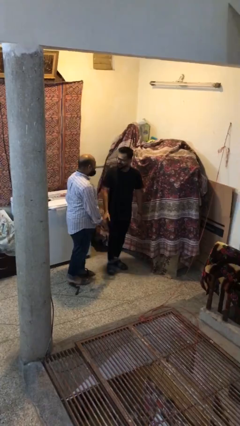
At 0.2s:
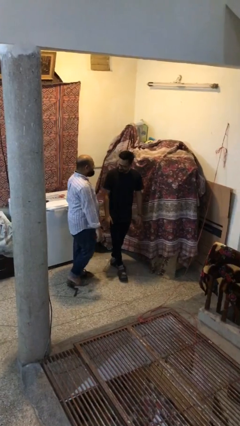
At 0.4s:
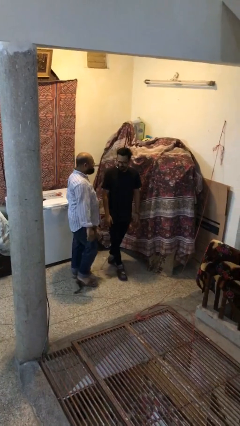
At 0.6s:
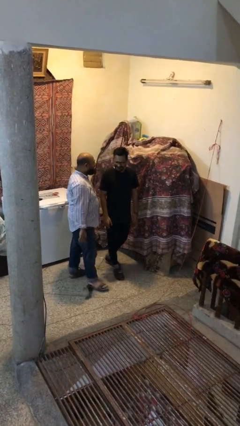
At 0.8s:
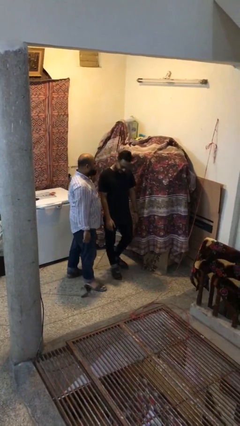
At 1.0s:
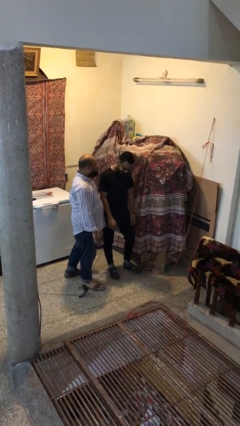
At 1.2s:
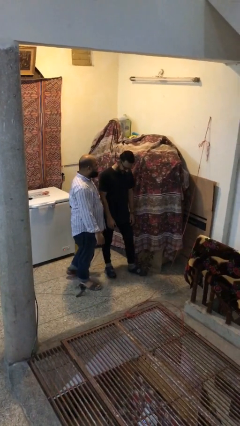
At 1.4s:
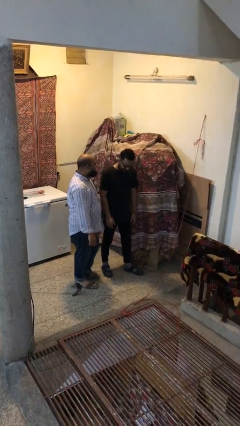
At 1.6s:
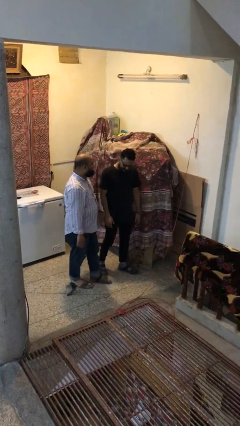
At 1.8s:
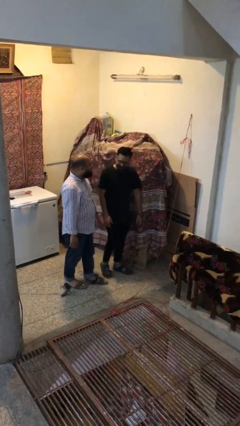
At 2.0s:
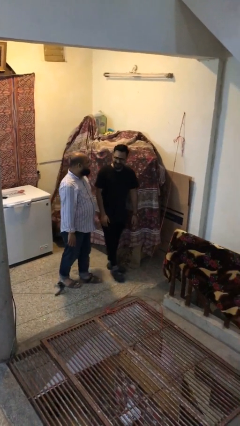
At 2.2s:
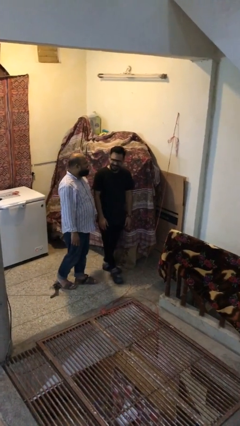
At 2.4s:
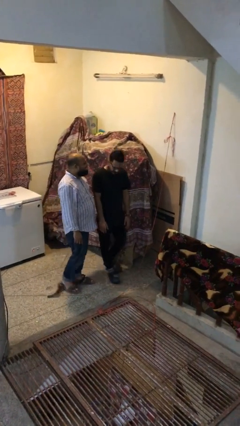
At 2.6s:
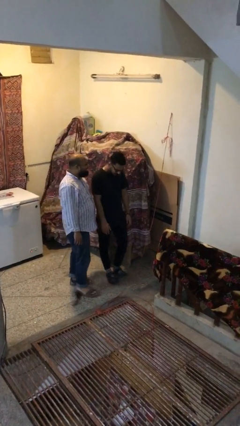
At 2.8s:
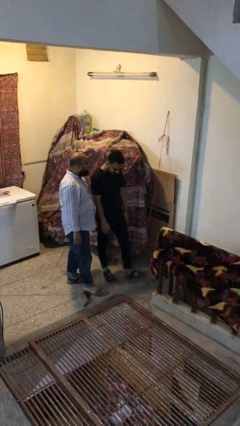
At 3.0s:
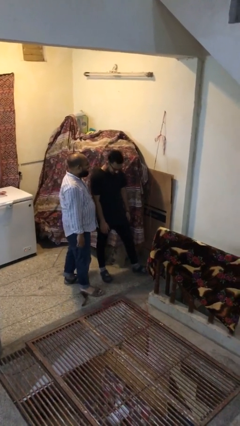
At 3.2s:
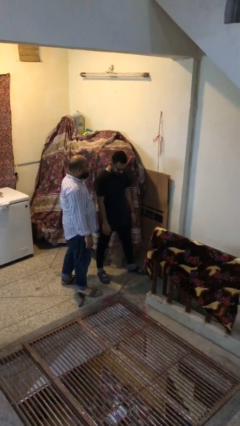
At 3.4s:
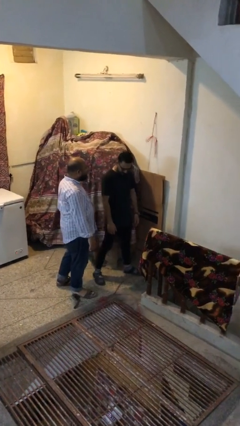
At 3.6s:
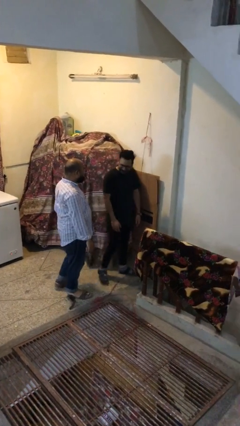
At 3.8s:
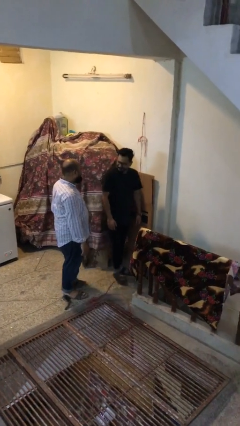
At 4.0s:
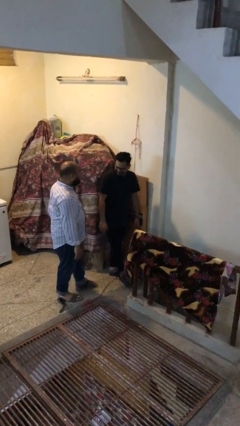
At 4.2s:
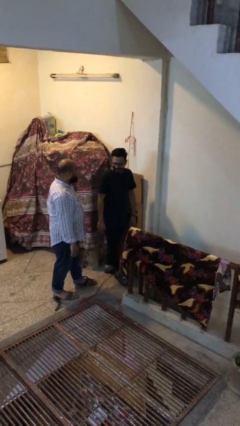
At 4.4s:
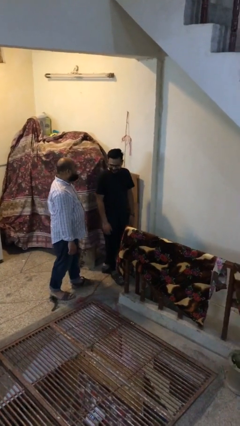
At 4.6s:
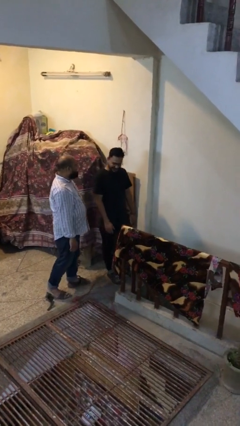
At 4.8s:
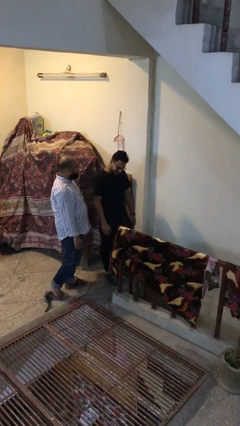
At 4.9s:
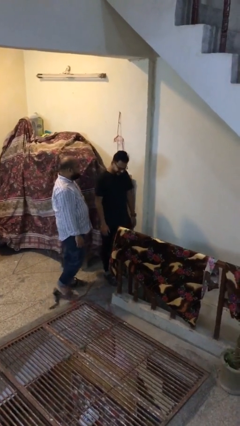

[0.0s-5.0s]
person talks to person

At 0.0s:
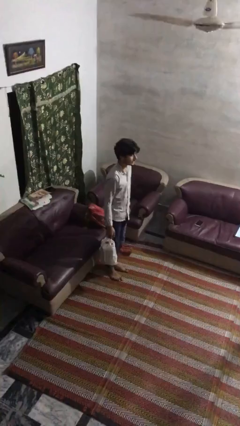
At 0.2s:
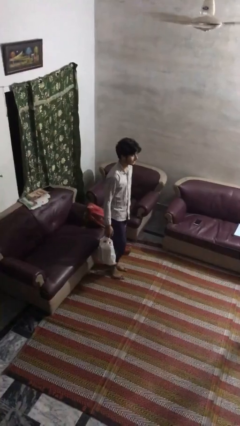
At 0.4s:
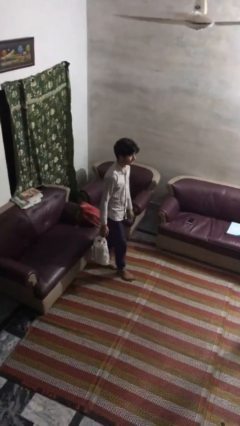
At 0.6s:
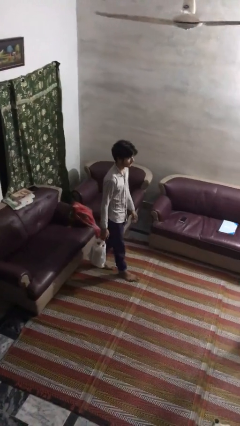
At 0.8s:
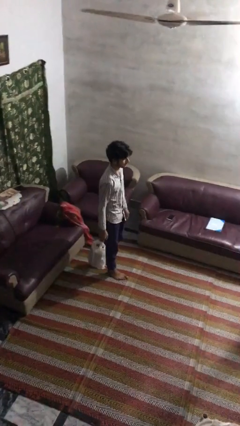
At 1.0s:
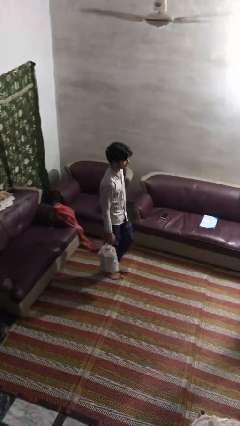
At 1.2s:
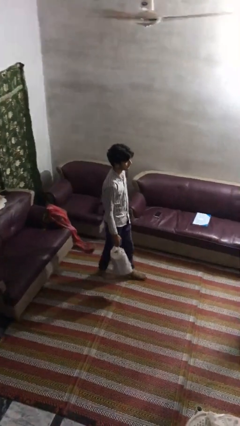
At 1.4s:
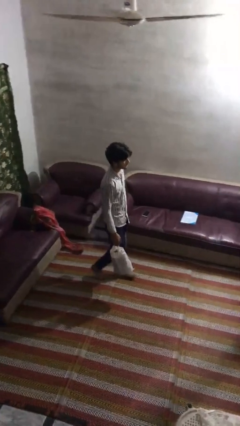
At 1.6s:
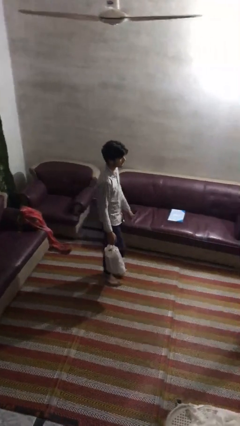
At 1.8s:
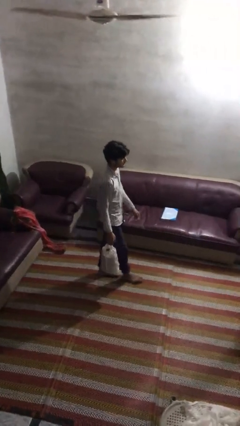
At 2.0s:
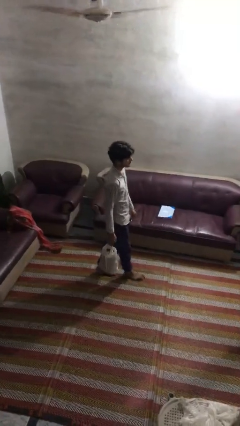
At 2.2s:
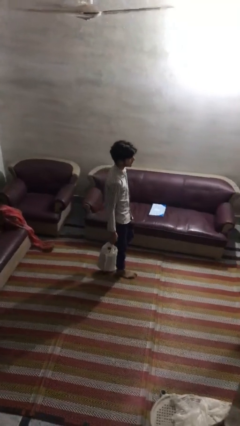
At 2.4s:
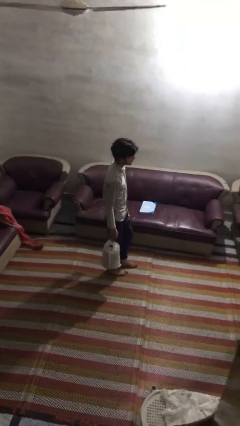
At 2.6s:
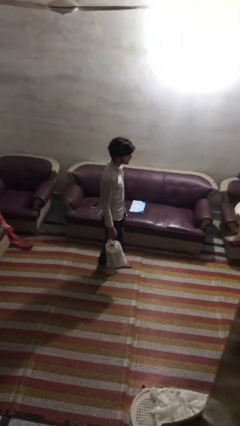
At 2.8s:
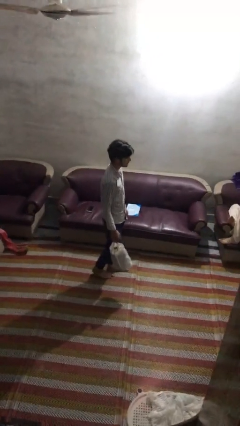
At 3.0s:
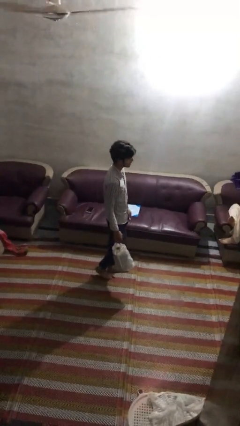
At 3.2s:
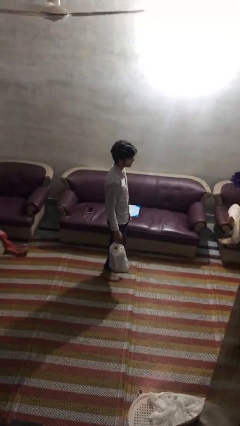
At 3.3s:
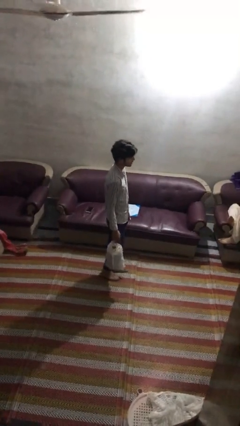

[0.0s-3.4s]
person carries groceries

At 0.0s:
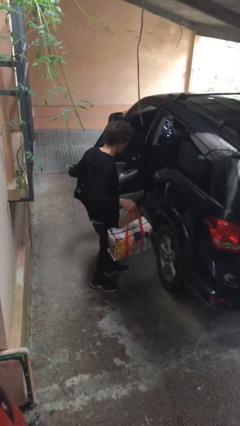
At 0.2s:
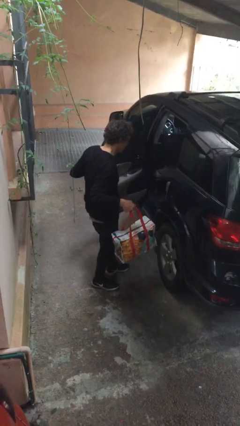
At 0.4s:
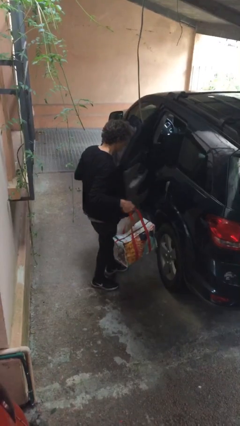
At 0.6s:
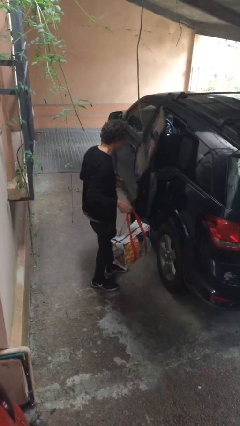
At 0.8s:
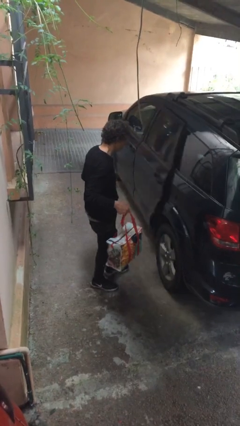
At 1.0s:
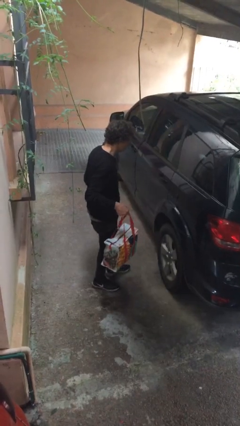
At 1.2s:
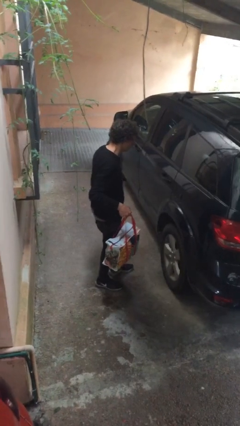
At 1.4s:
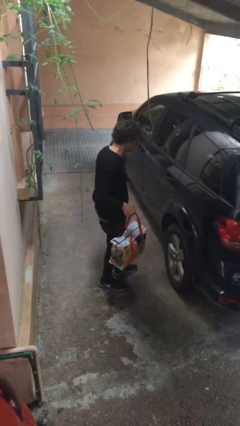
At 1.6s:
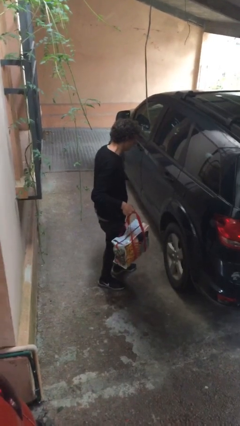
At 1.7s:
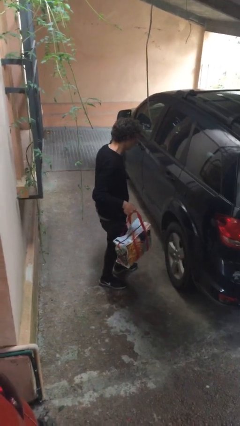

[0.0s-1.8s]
person closes car door

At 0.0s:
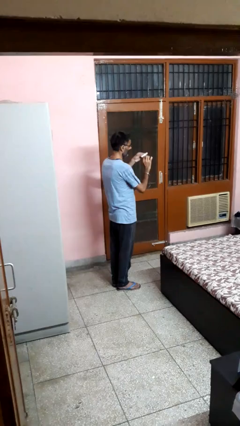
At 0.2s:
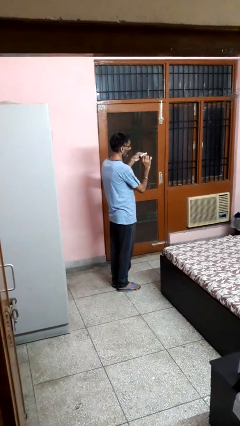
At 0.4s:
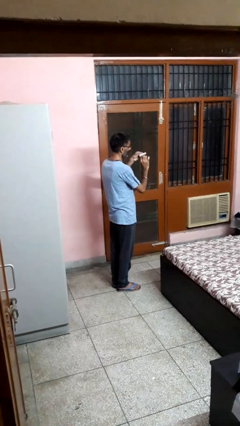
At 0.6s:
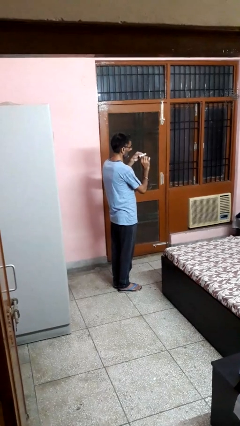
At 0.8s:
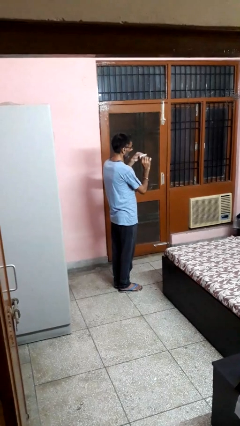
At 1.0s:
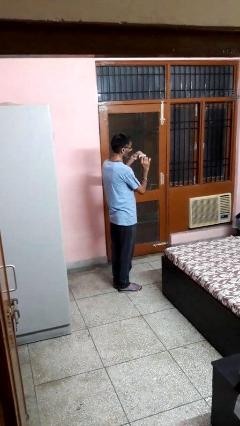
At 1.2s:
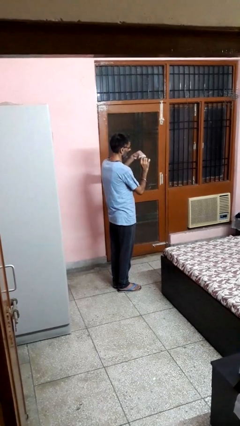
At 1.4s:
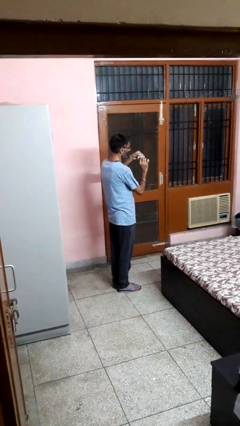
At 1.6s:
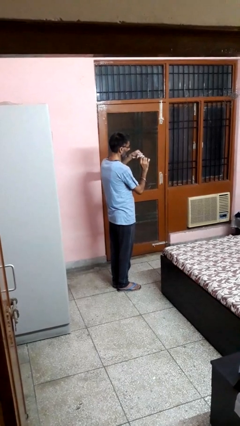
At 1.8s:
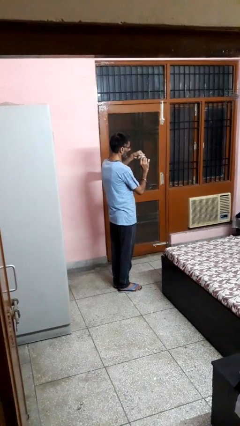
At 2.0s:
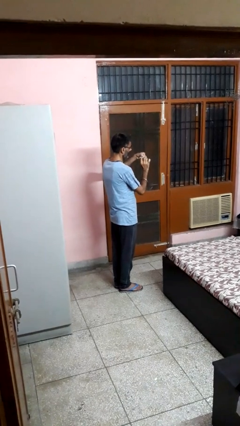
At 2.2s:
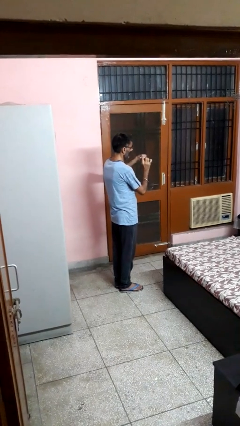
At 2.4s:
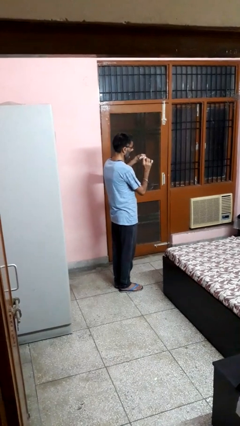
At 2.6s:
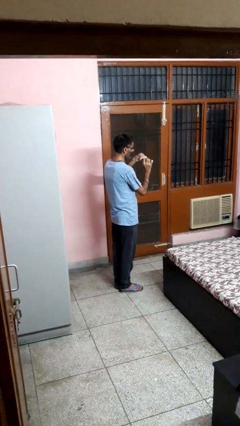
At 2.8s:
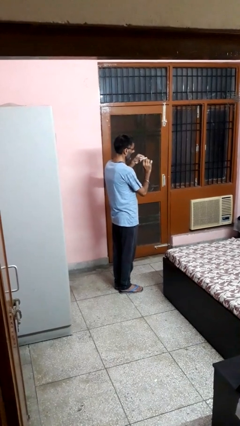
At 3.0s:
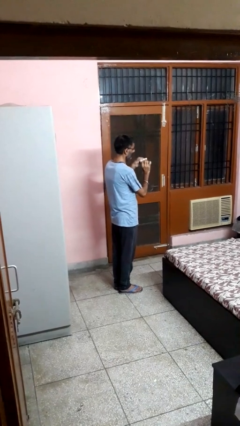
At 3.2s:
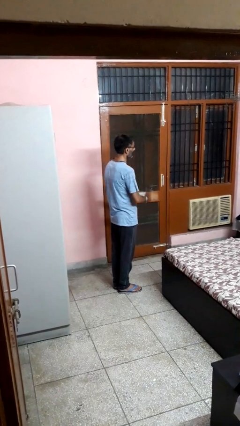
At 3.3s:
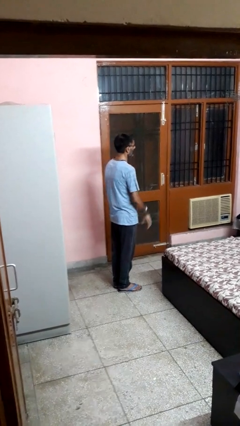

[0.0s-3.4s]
person files fingernails

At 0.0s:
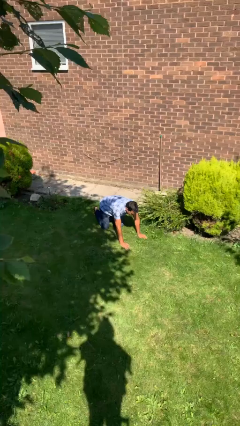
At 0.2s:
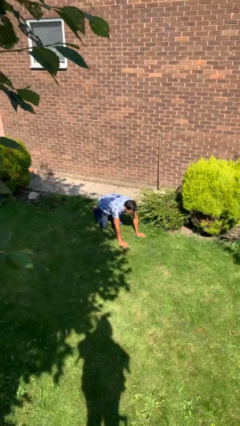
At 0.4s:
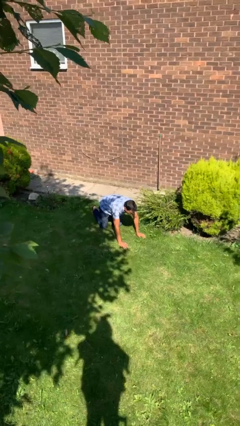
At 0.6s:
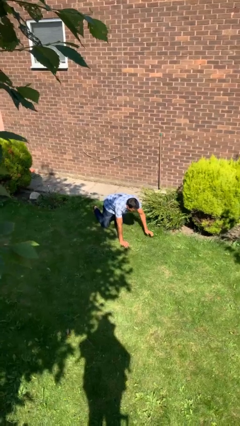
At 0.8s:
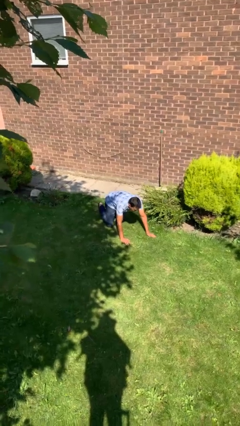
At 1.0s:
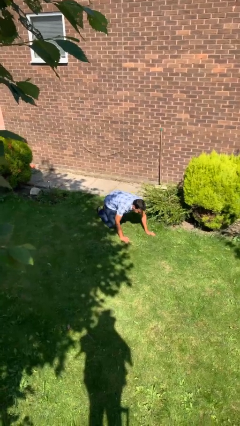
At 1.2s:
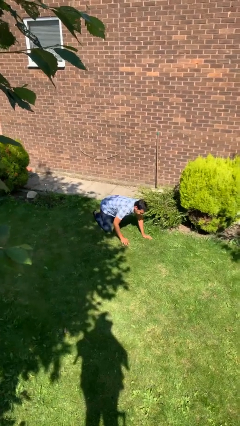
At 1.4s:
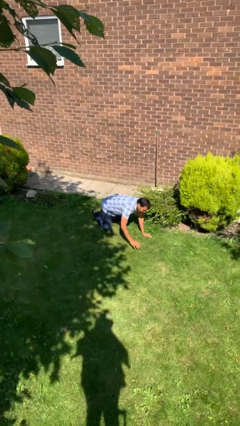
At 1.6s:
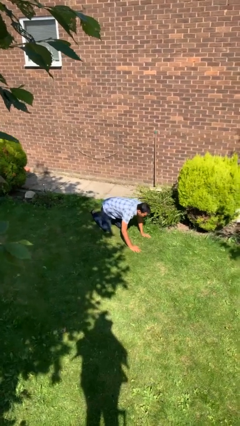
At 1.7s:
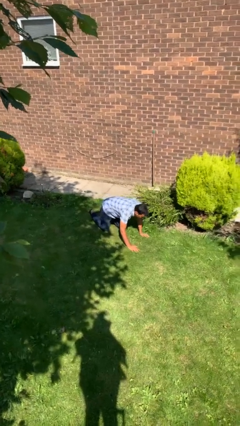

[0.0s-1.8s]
person crawls

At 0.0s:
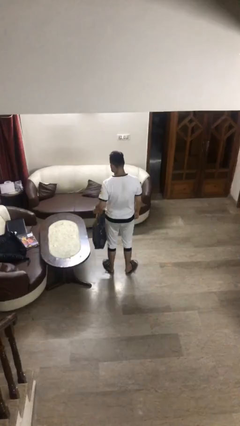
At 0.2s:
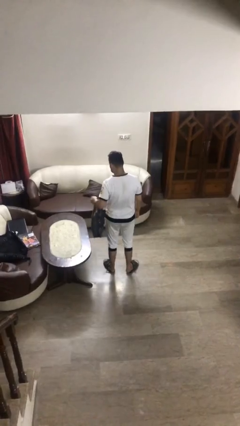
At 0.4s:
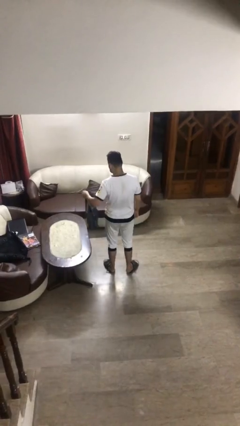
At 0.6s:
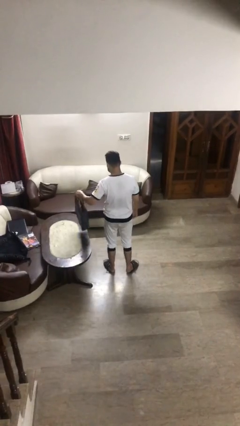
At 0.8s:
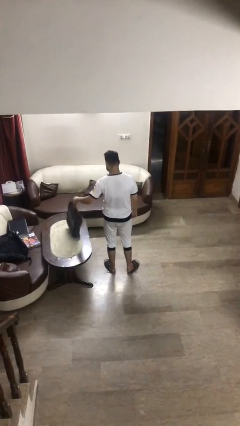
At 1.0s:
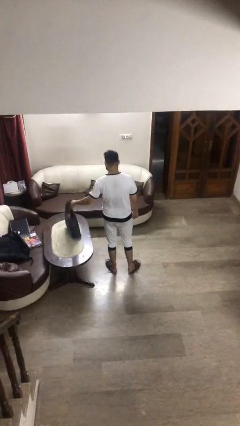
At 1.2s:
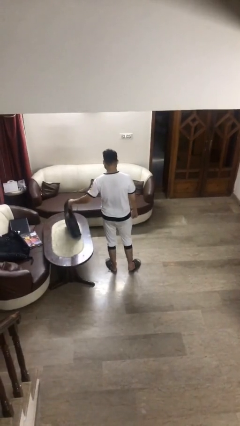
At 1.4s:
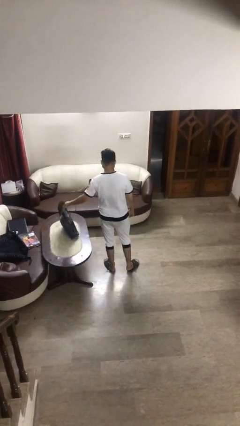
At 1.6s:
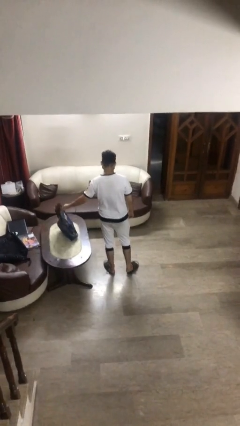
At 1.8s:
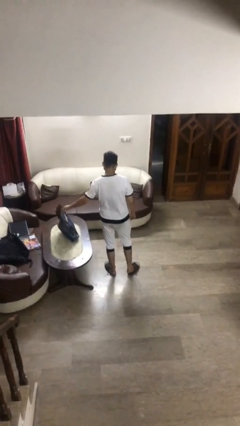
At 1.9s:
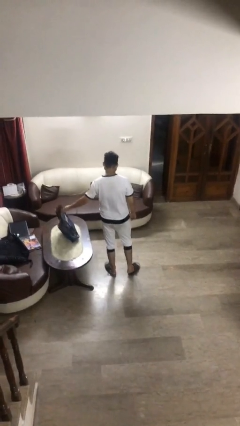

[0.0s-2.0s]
person puts down object on table
